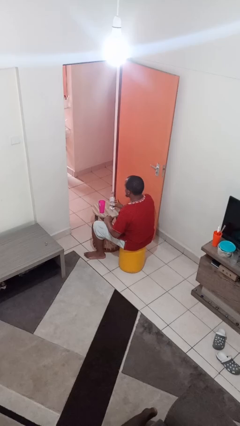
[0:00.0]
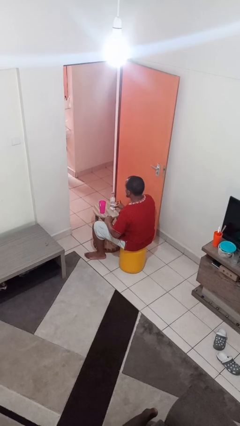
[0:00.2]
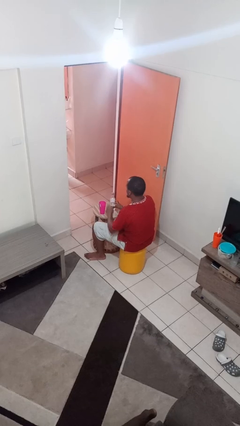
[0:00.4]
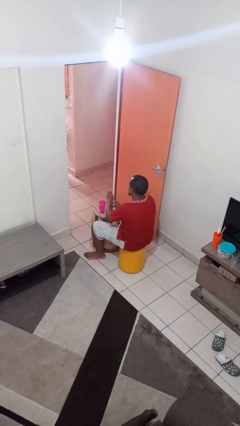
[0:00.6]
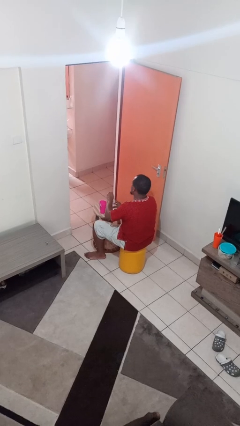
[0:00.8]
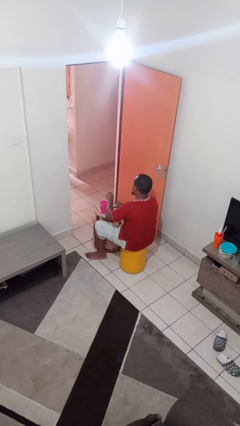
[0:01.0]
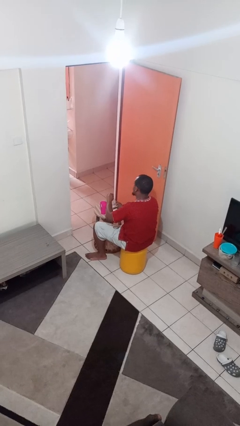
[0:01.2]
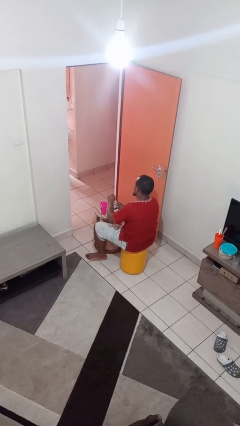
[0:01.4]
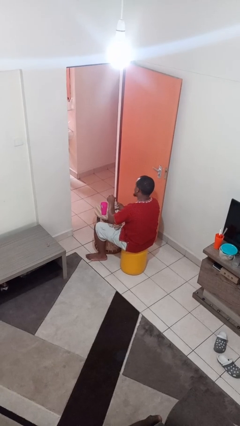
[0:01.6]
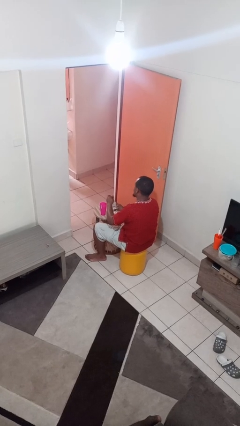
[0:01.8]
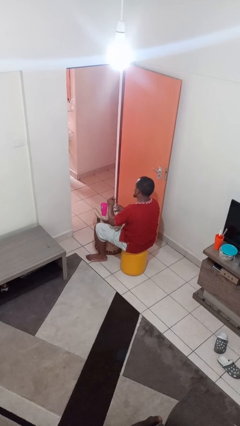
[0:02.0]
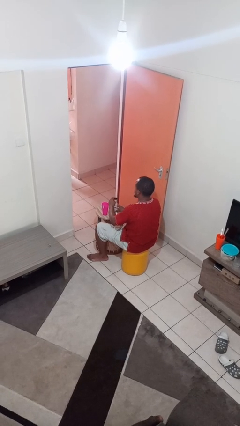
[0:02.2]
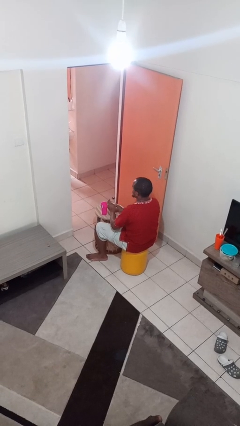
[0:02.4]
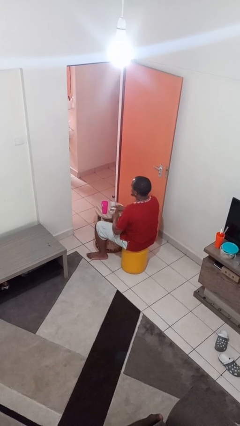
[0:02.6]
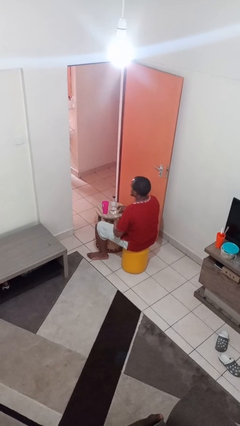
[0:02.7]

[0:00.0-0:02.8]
person screws lid to bottle

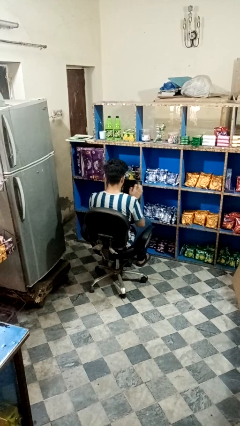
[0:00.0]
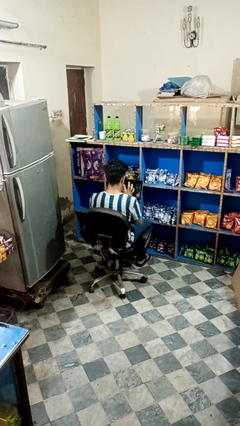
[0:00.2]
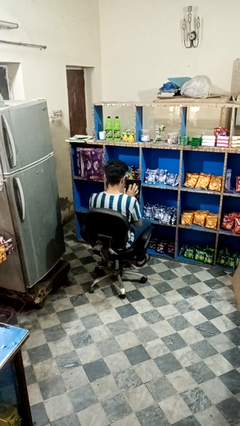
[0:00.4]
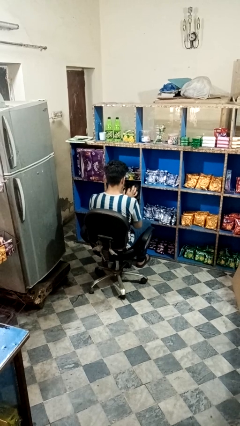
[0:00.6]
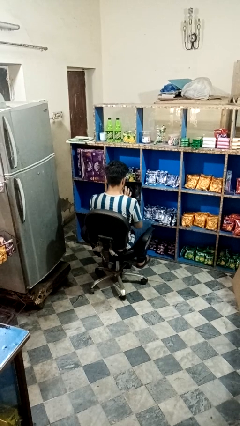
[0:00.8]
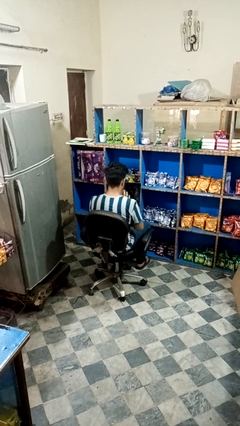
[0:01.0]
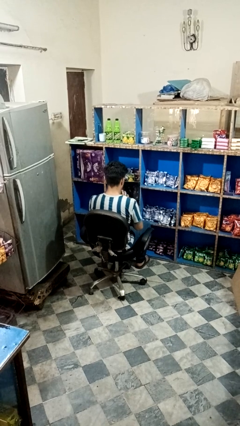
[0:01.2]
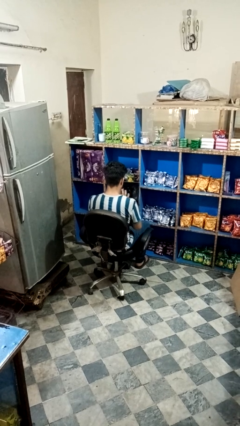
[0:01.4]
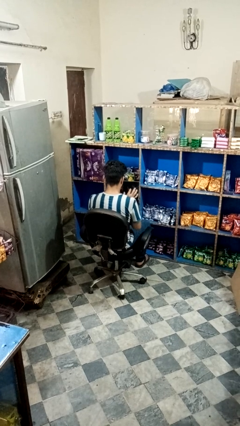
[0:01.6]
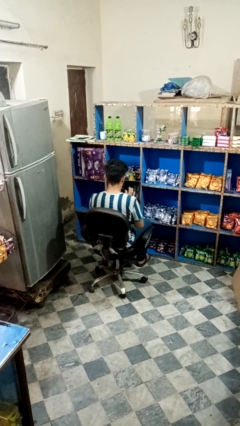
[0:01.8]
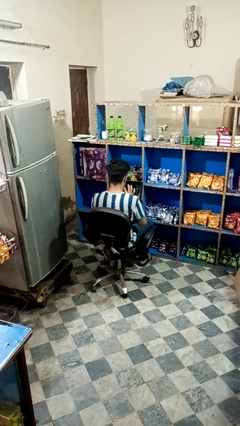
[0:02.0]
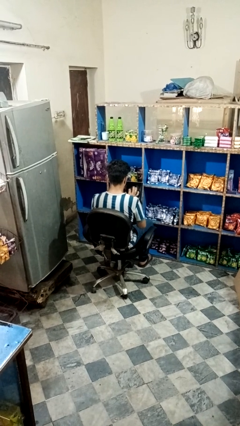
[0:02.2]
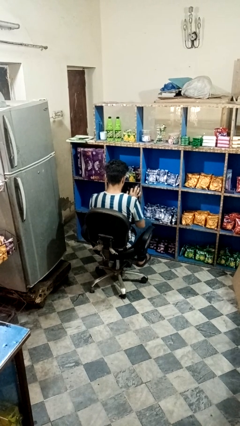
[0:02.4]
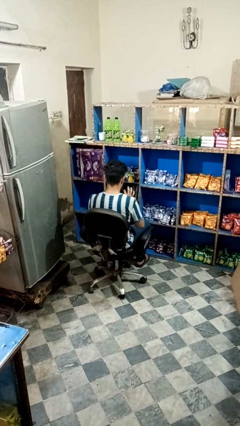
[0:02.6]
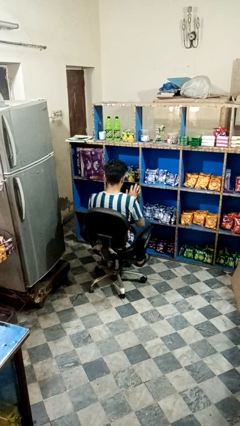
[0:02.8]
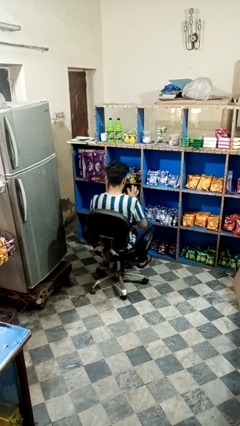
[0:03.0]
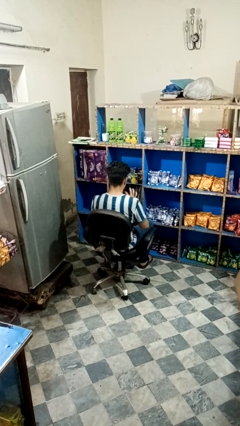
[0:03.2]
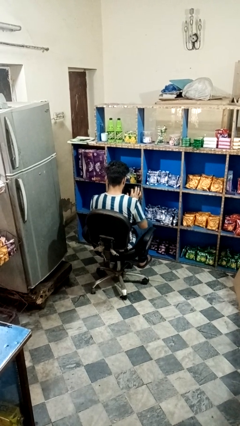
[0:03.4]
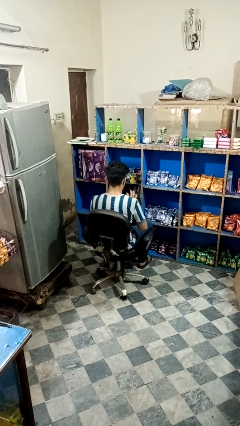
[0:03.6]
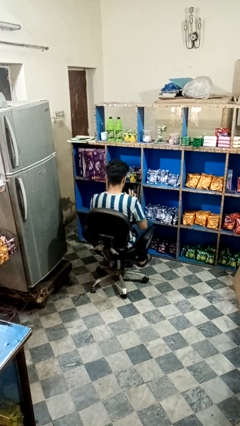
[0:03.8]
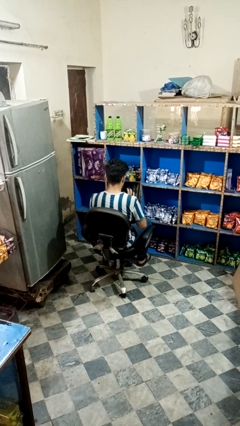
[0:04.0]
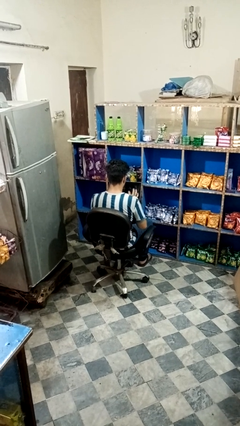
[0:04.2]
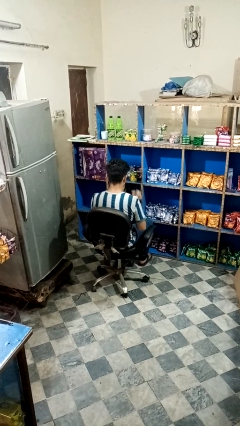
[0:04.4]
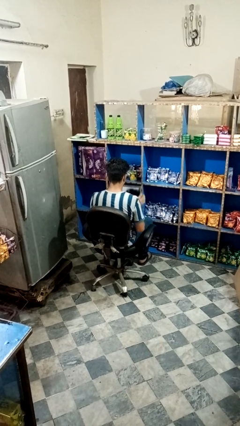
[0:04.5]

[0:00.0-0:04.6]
person interacts with tablet

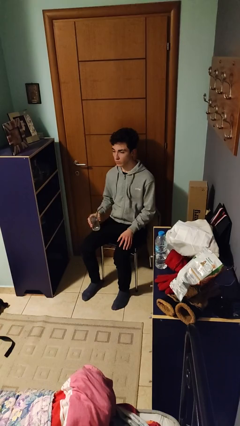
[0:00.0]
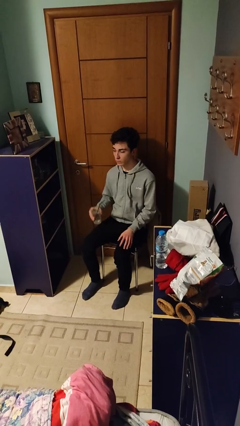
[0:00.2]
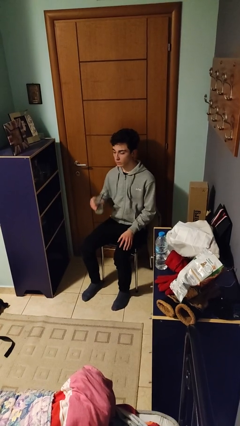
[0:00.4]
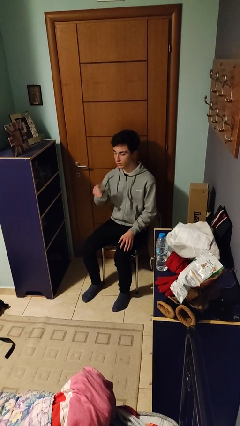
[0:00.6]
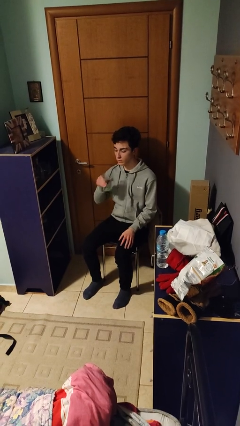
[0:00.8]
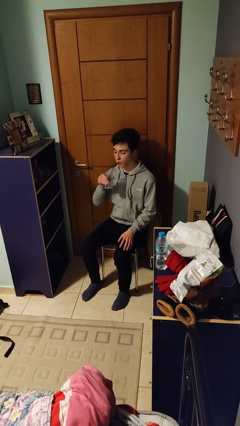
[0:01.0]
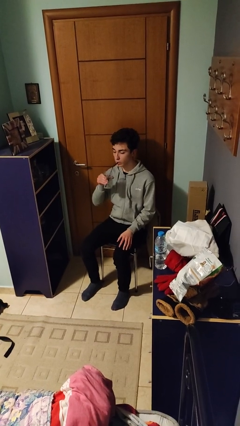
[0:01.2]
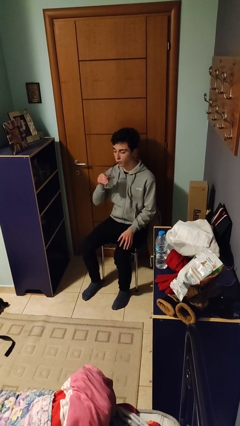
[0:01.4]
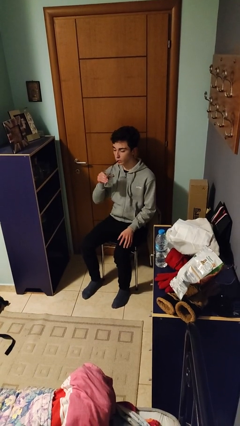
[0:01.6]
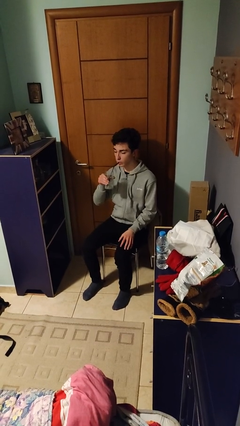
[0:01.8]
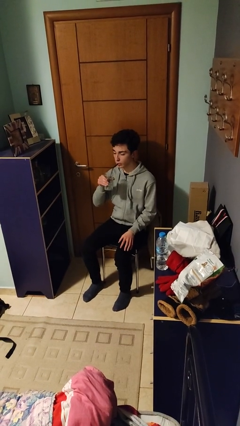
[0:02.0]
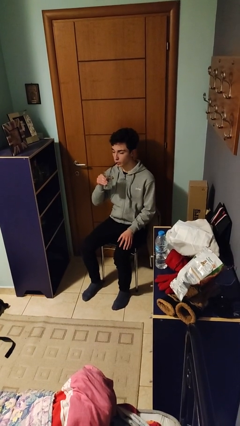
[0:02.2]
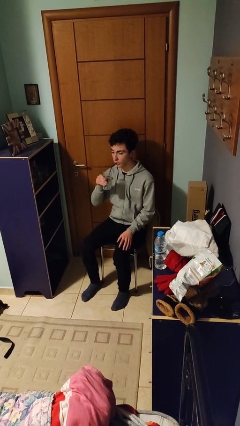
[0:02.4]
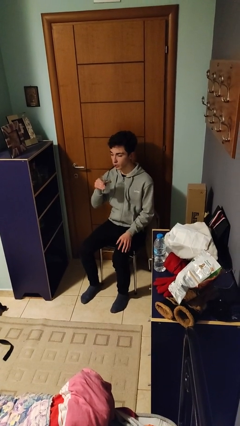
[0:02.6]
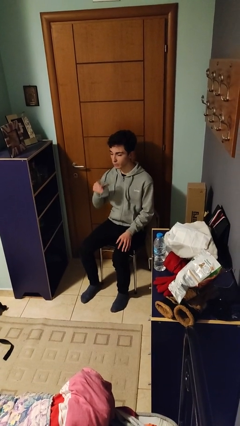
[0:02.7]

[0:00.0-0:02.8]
person drinks from straw

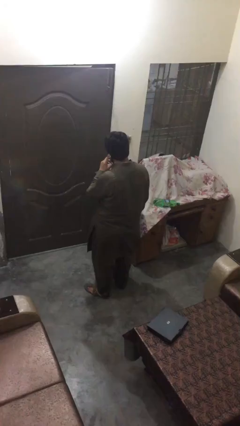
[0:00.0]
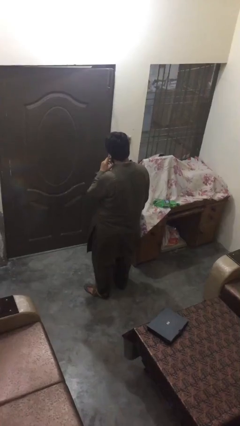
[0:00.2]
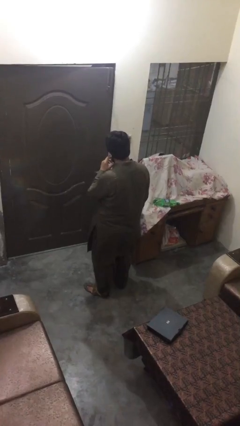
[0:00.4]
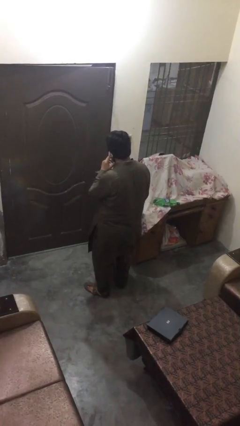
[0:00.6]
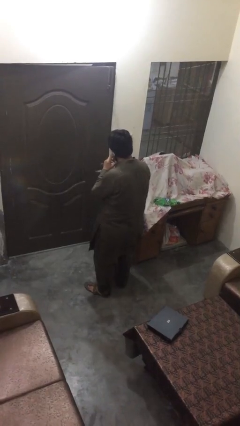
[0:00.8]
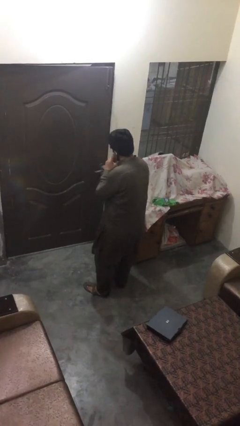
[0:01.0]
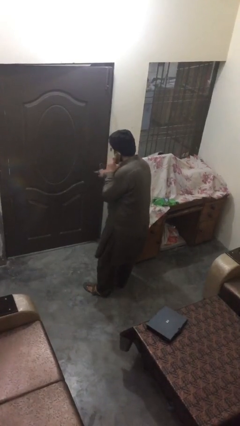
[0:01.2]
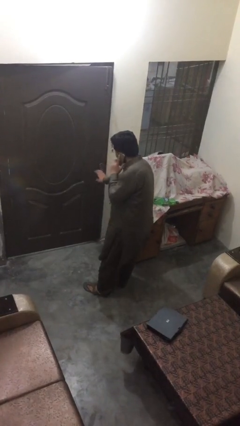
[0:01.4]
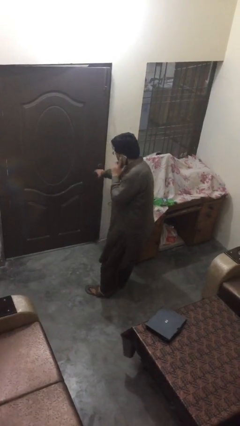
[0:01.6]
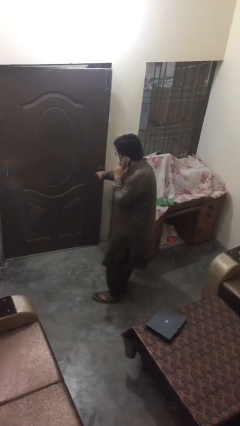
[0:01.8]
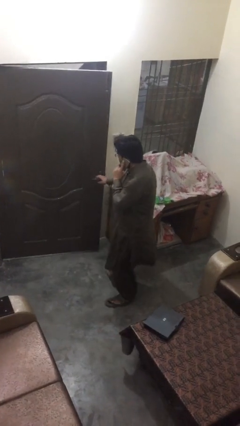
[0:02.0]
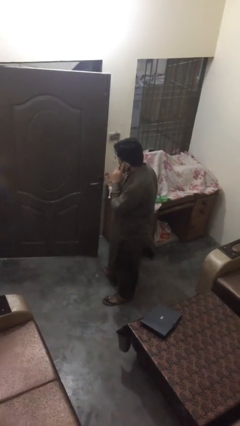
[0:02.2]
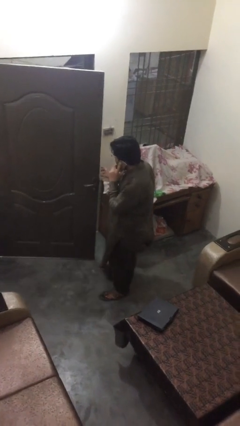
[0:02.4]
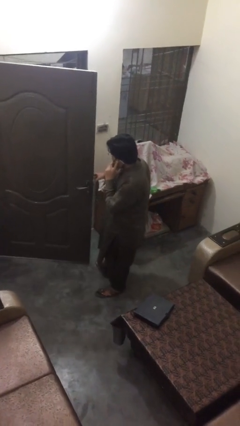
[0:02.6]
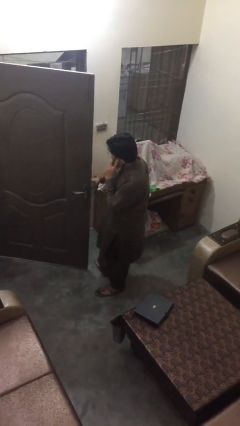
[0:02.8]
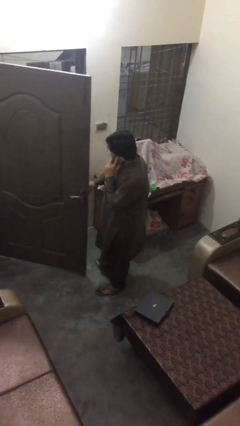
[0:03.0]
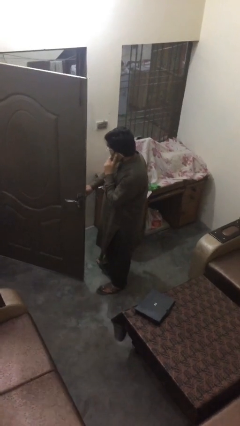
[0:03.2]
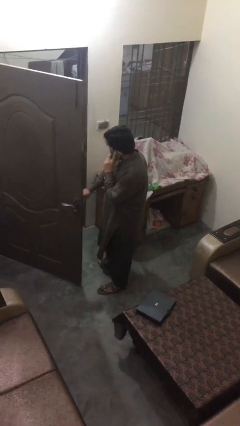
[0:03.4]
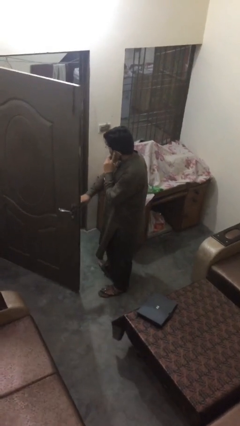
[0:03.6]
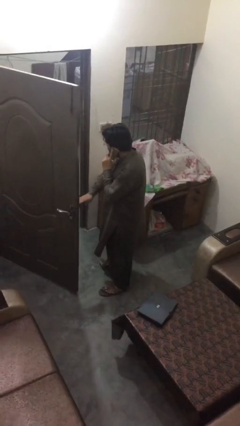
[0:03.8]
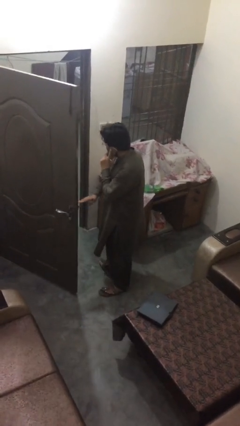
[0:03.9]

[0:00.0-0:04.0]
person opens facility door

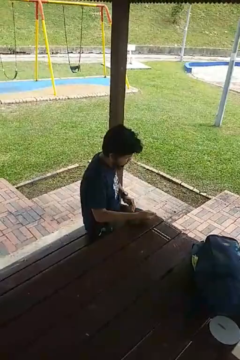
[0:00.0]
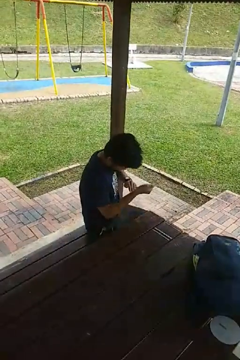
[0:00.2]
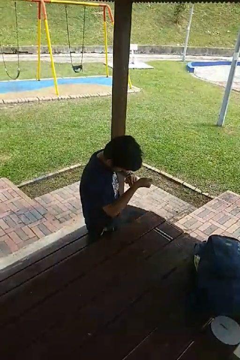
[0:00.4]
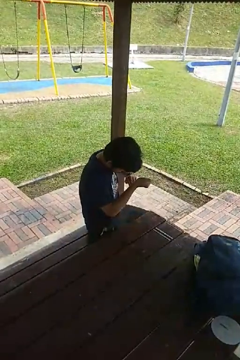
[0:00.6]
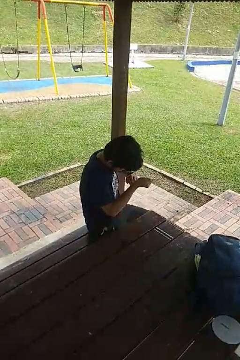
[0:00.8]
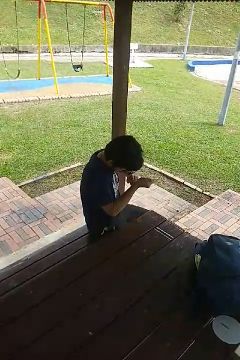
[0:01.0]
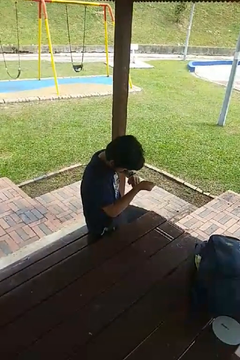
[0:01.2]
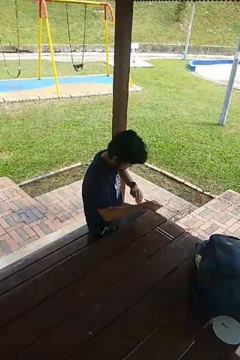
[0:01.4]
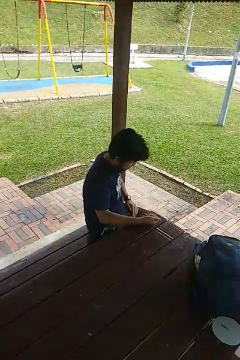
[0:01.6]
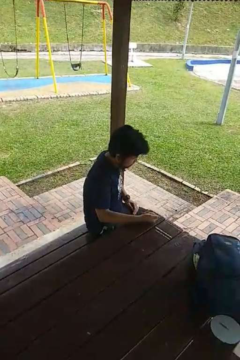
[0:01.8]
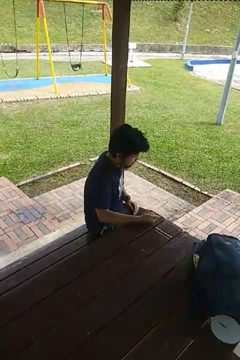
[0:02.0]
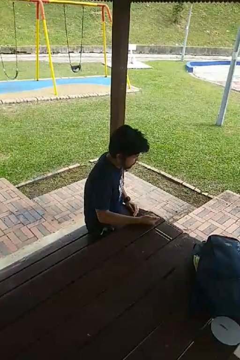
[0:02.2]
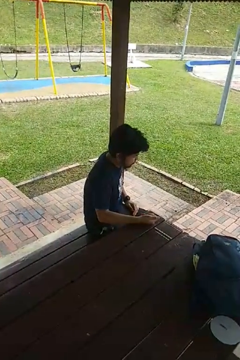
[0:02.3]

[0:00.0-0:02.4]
person paints fingernails

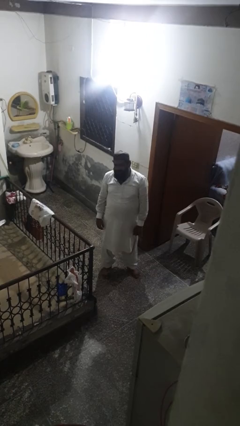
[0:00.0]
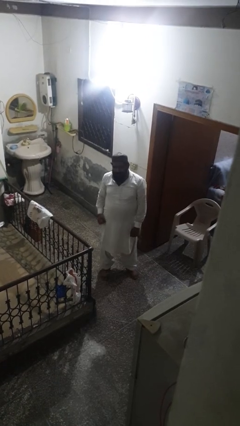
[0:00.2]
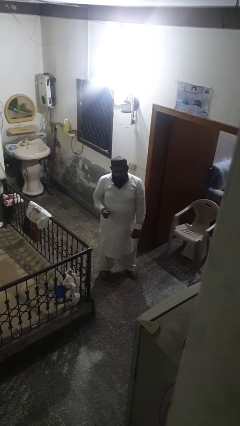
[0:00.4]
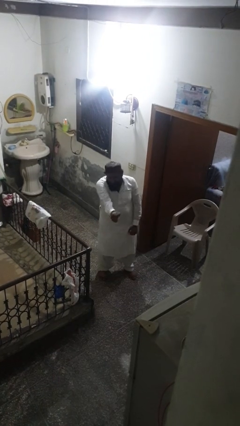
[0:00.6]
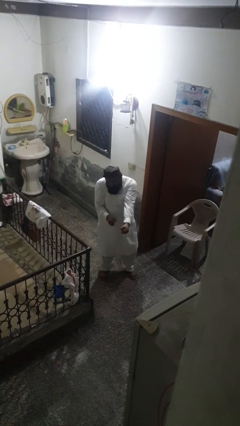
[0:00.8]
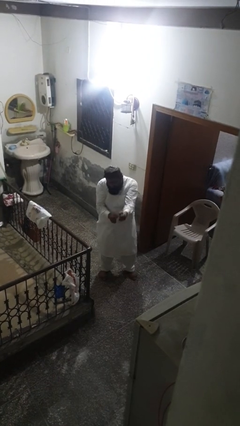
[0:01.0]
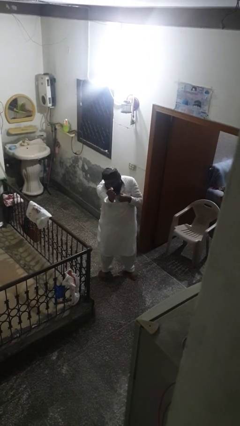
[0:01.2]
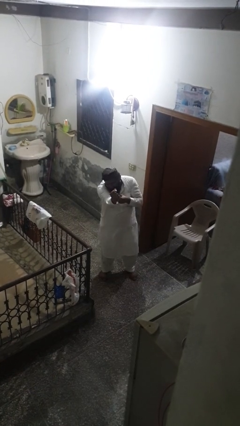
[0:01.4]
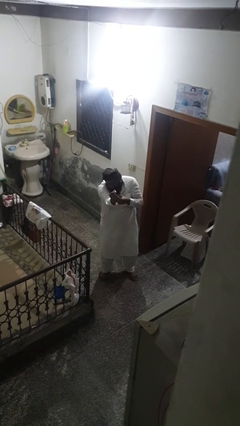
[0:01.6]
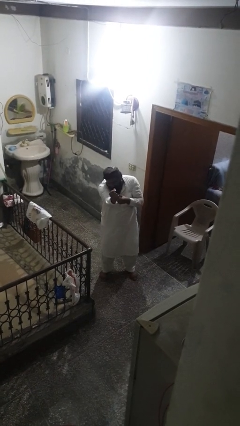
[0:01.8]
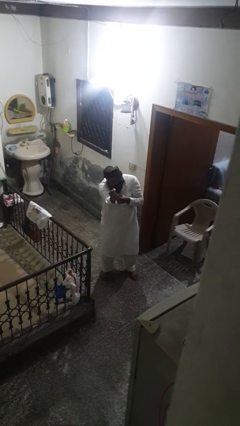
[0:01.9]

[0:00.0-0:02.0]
person punches
